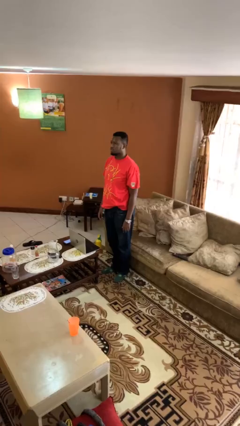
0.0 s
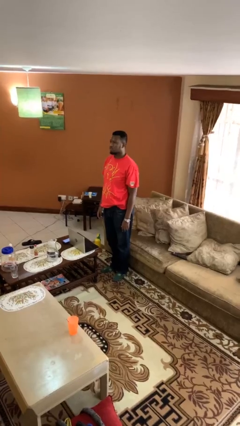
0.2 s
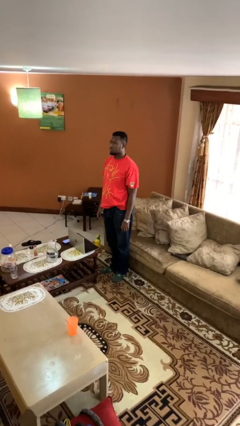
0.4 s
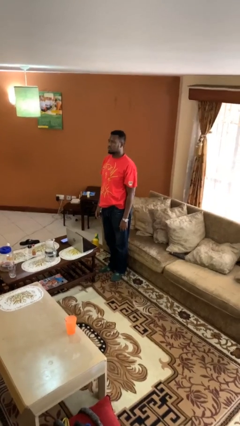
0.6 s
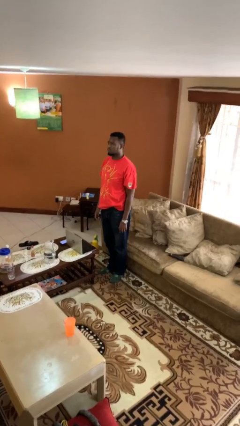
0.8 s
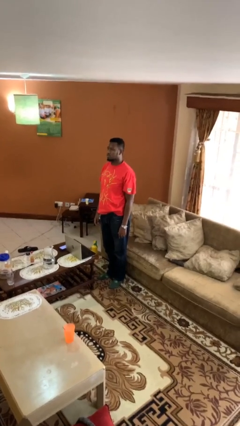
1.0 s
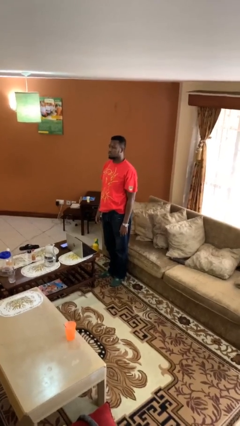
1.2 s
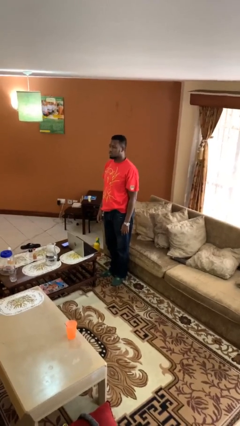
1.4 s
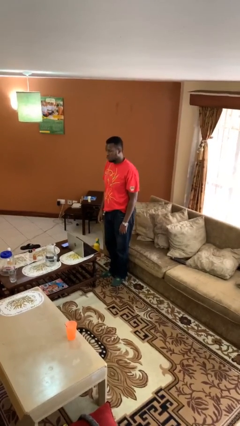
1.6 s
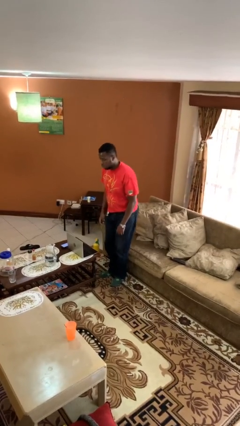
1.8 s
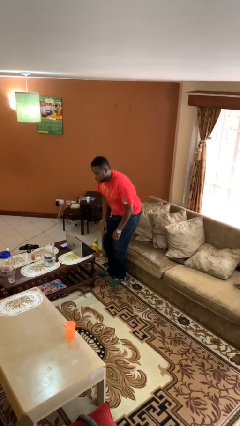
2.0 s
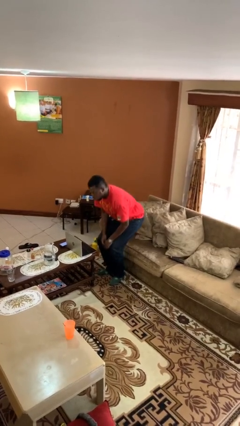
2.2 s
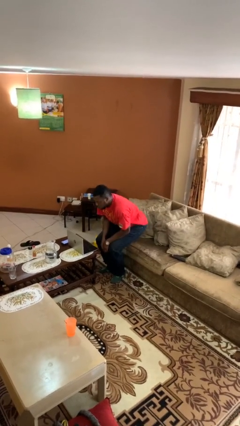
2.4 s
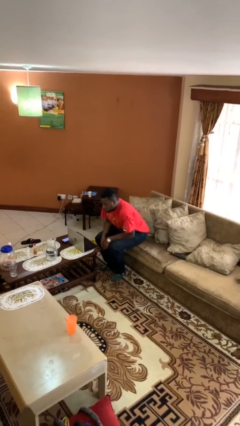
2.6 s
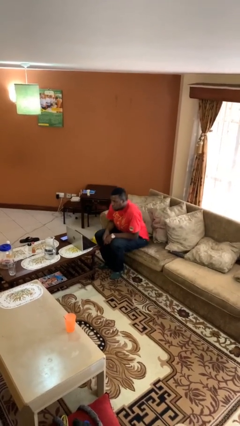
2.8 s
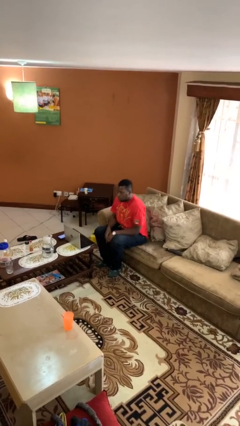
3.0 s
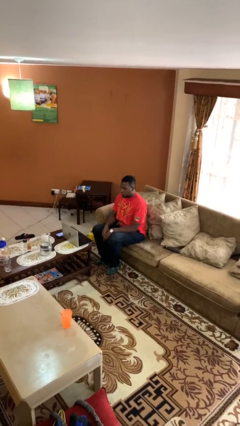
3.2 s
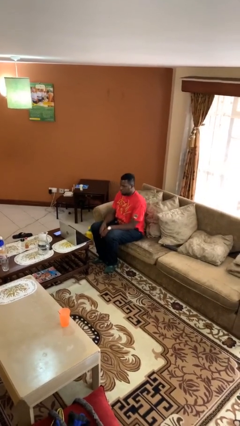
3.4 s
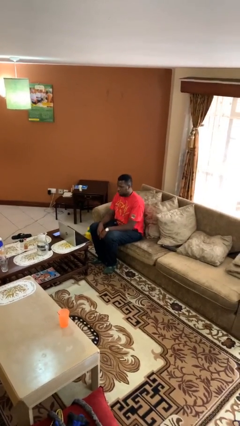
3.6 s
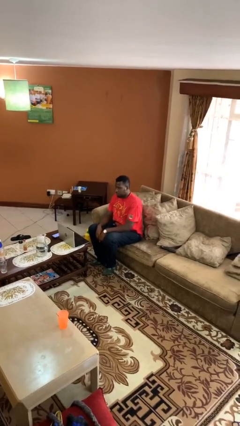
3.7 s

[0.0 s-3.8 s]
person sits down

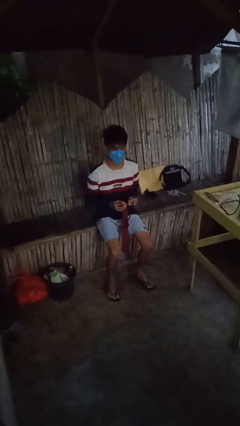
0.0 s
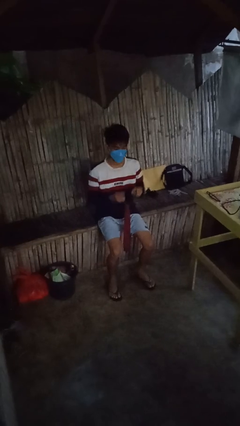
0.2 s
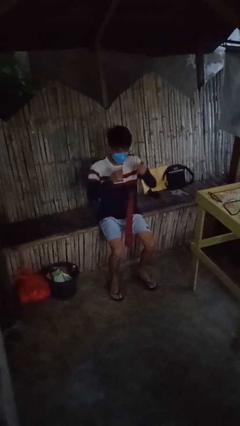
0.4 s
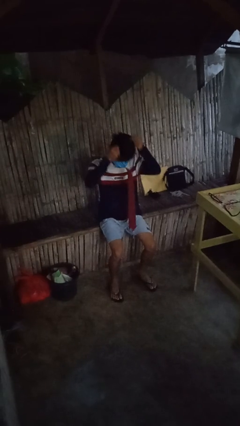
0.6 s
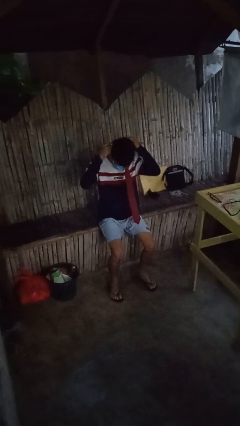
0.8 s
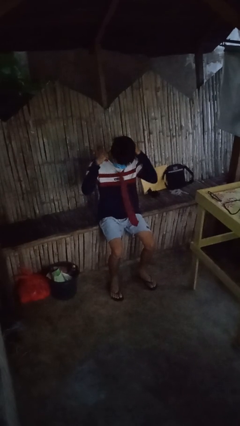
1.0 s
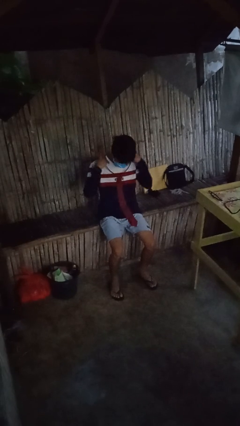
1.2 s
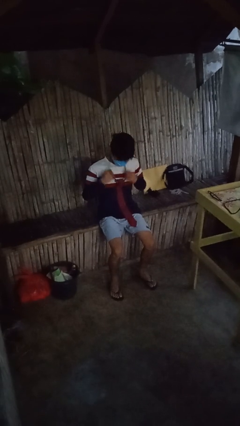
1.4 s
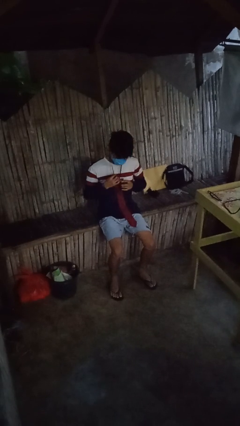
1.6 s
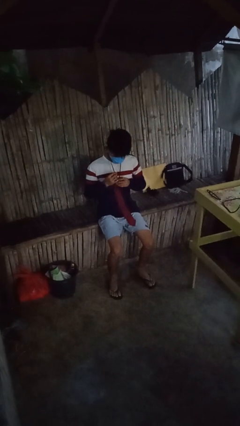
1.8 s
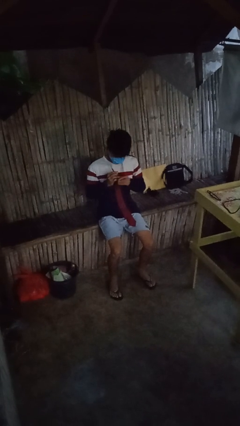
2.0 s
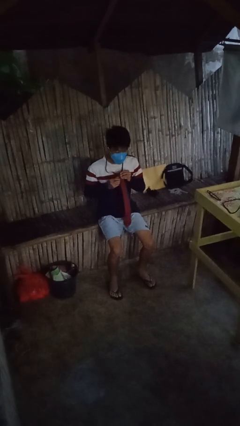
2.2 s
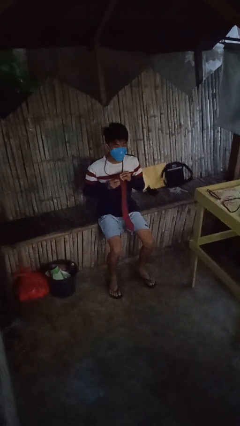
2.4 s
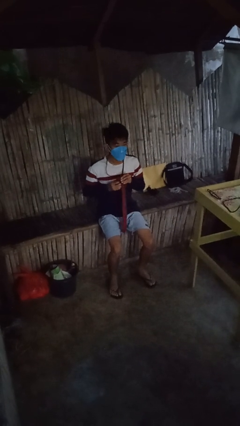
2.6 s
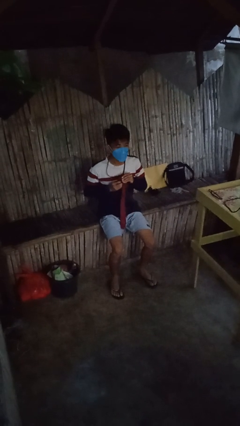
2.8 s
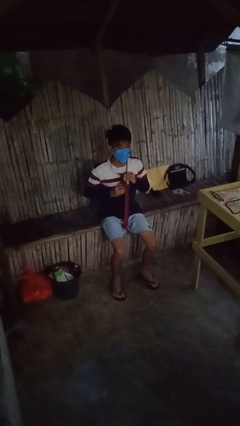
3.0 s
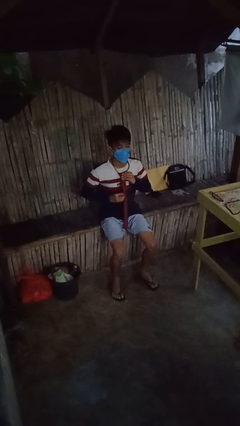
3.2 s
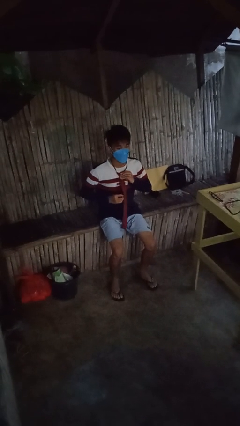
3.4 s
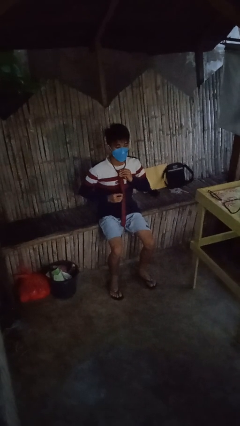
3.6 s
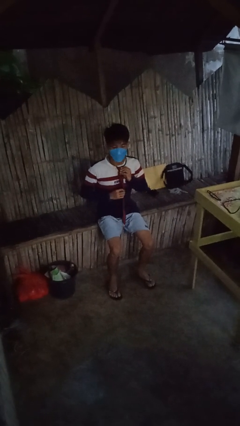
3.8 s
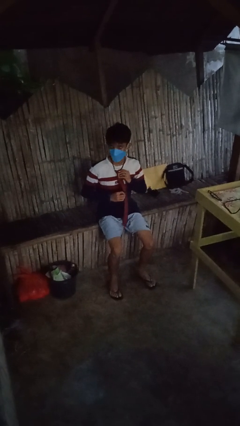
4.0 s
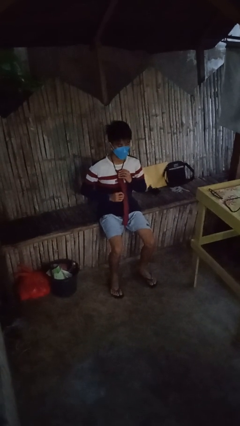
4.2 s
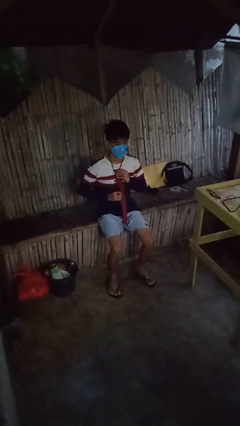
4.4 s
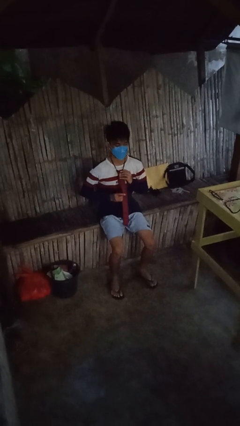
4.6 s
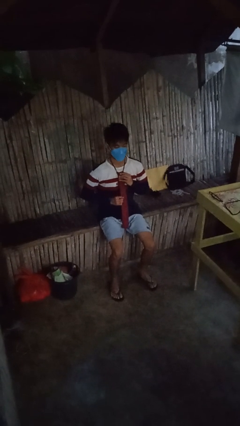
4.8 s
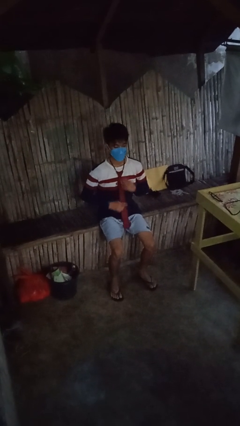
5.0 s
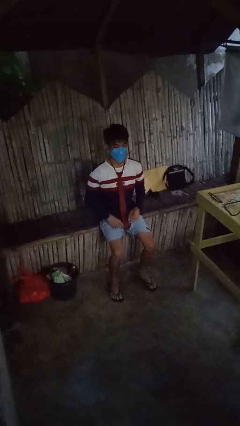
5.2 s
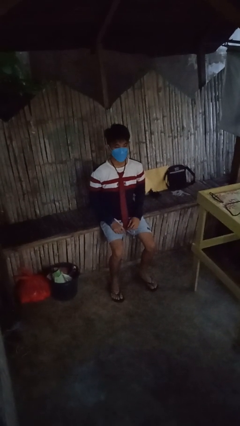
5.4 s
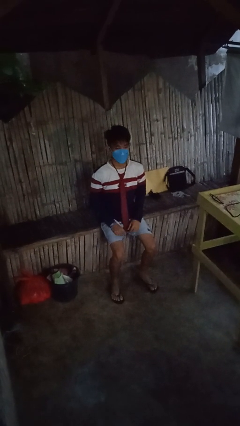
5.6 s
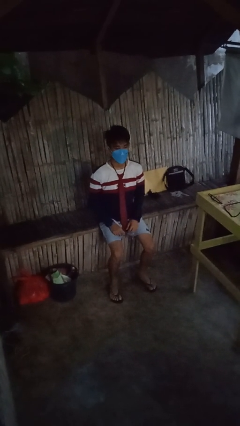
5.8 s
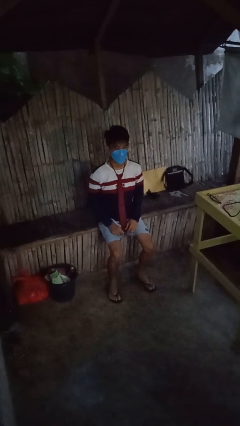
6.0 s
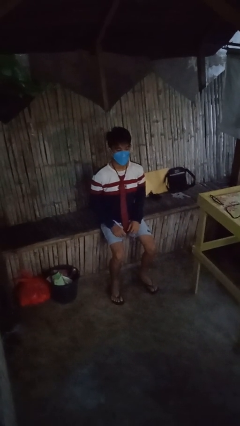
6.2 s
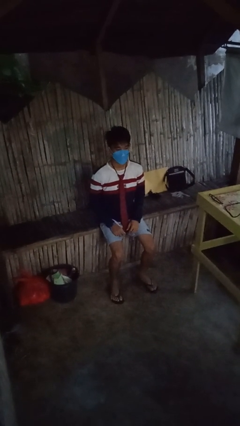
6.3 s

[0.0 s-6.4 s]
person puts on necktie

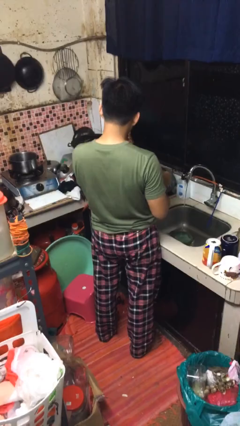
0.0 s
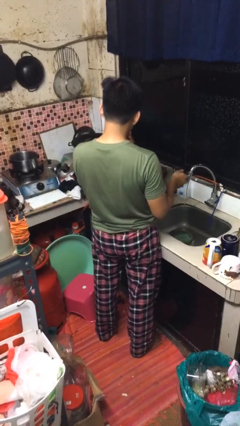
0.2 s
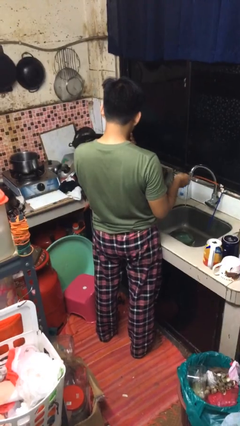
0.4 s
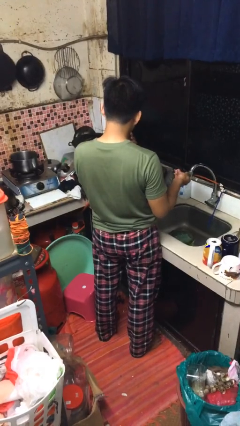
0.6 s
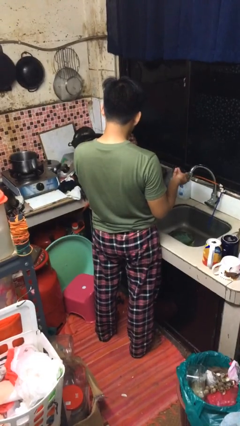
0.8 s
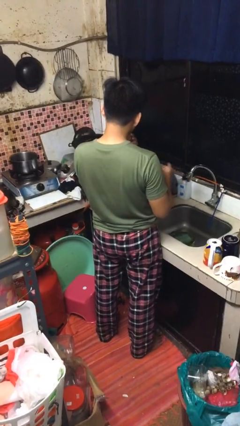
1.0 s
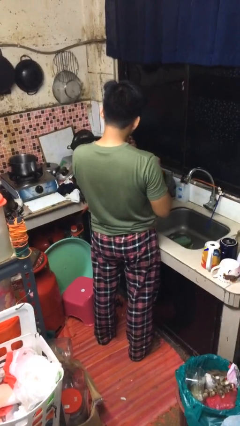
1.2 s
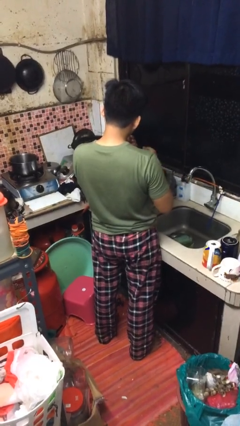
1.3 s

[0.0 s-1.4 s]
person turns off faucet

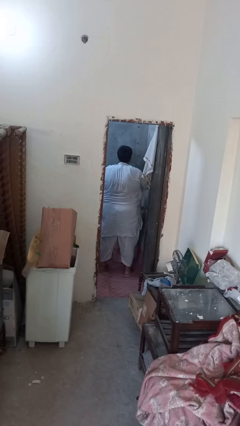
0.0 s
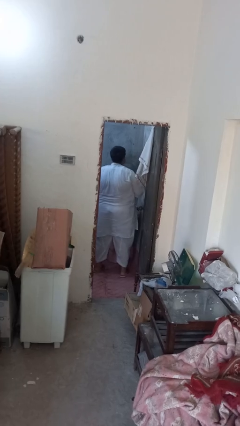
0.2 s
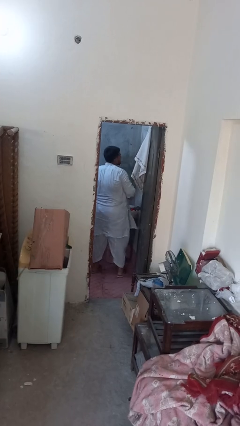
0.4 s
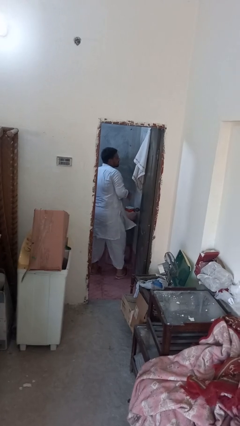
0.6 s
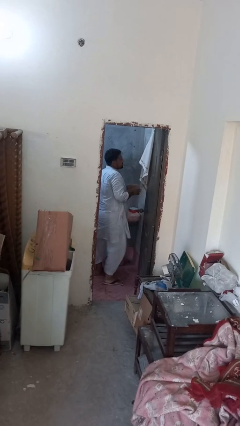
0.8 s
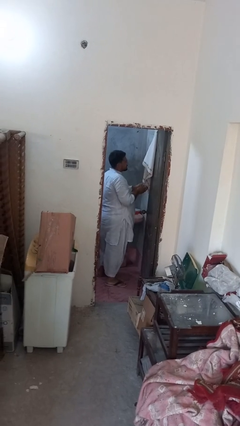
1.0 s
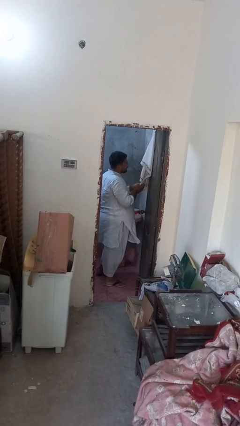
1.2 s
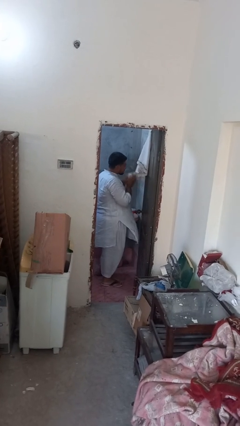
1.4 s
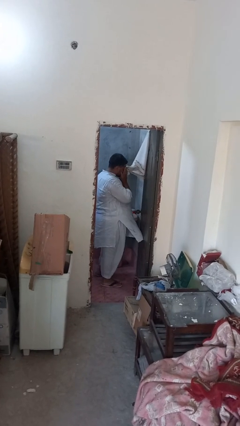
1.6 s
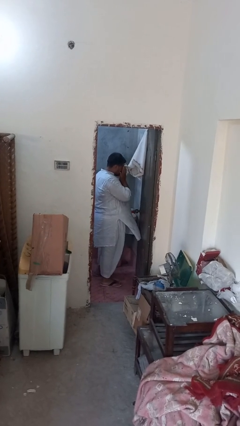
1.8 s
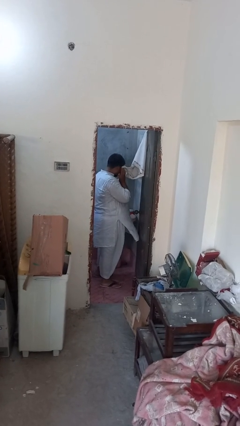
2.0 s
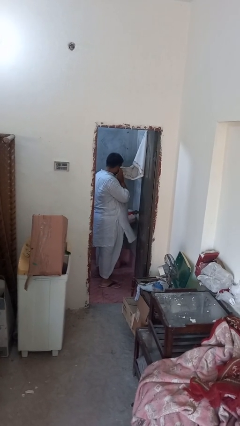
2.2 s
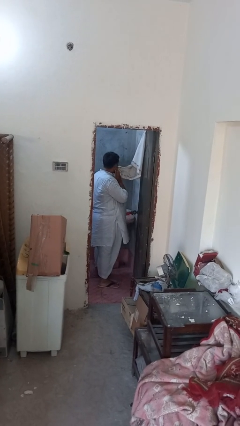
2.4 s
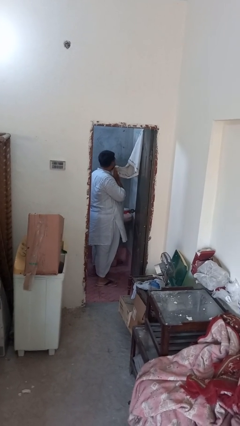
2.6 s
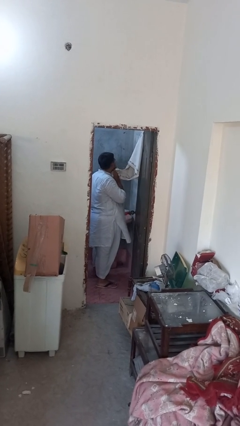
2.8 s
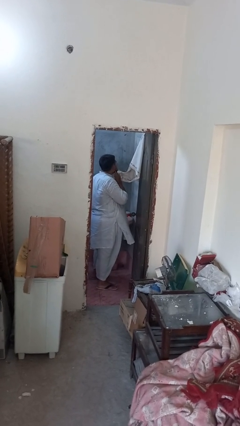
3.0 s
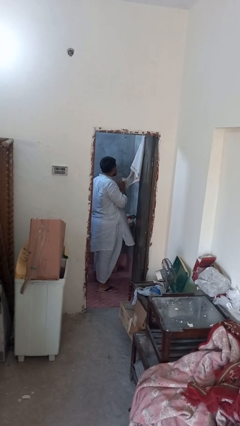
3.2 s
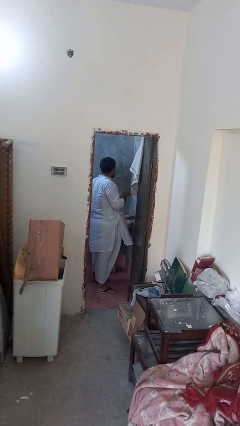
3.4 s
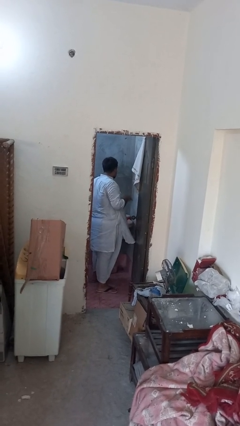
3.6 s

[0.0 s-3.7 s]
person dries face with towel

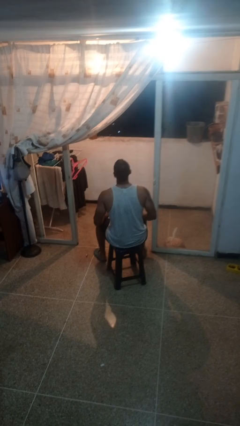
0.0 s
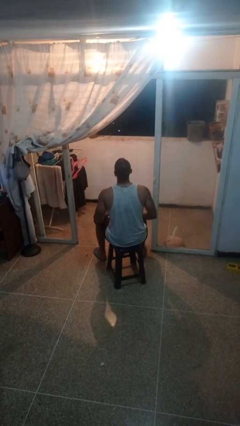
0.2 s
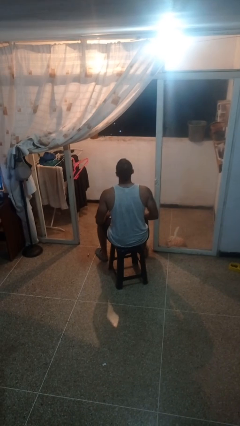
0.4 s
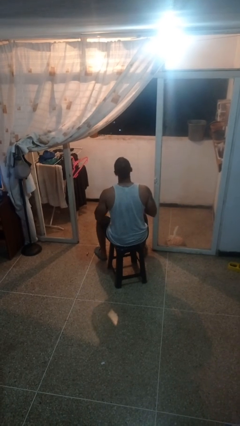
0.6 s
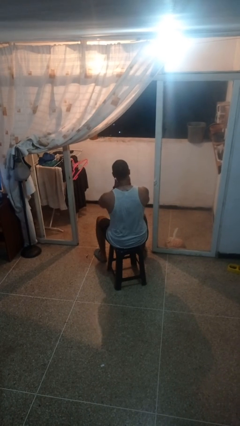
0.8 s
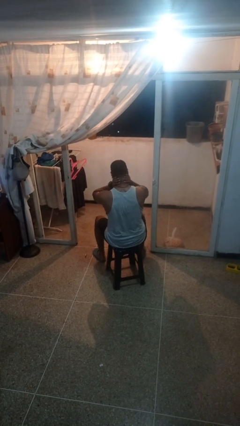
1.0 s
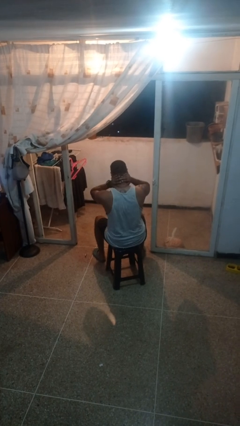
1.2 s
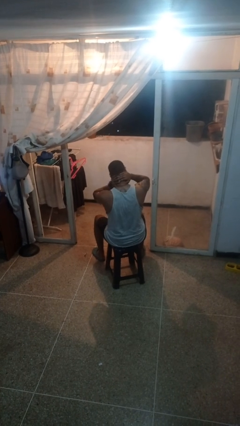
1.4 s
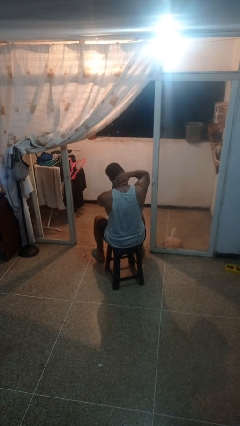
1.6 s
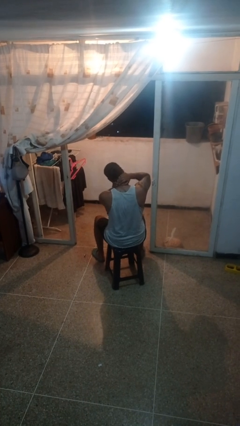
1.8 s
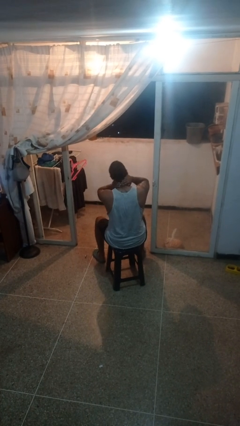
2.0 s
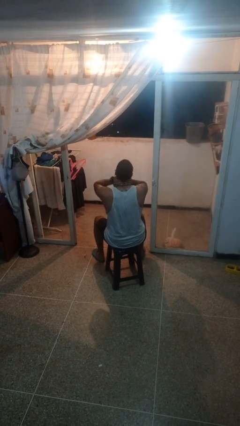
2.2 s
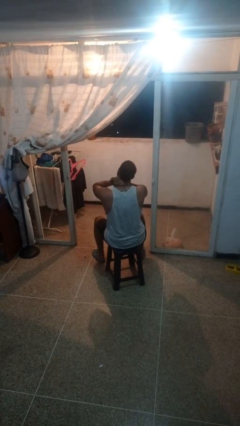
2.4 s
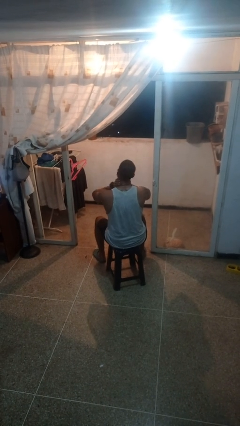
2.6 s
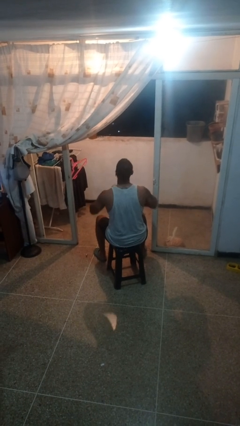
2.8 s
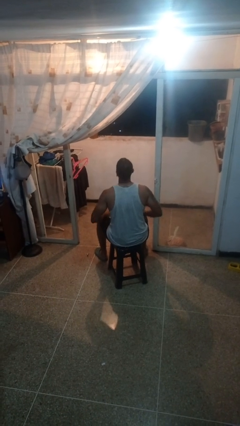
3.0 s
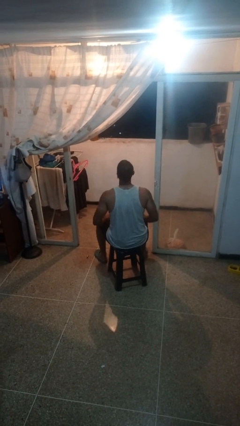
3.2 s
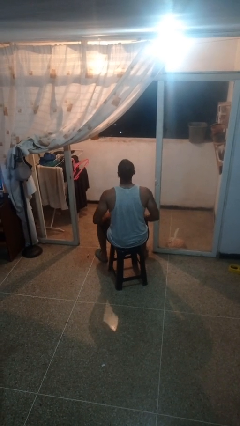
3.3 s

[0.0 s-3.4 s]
person rubs neck
